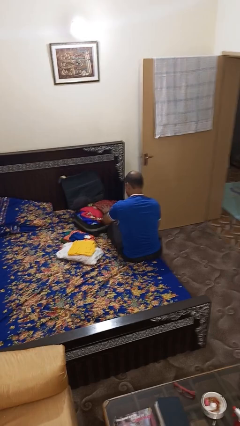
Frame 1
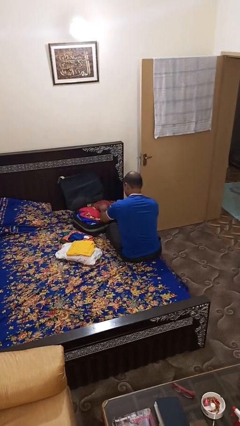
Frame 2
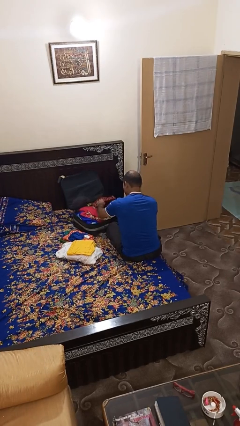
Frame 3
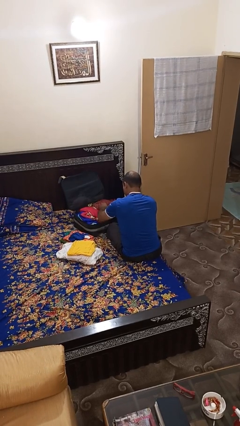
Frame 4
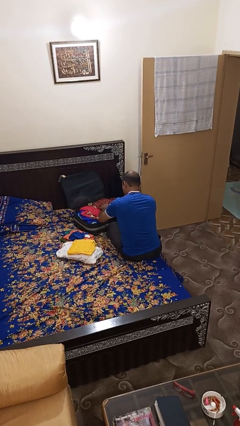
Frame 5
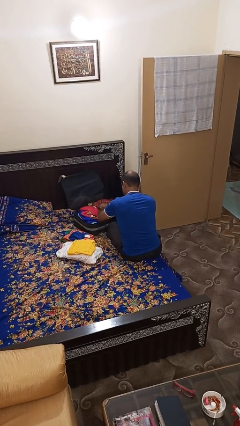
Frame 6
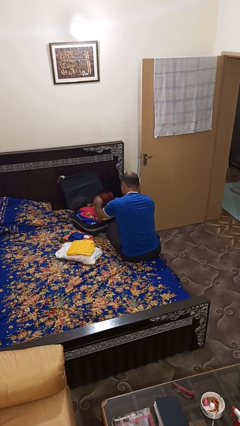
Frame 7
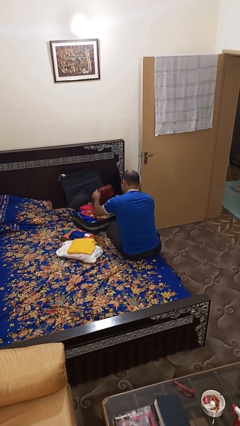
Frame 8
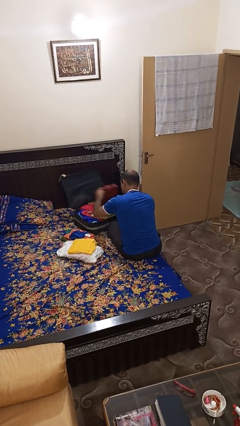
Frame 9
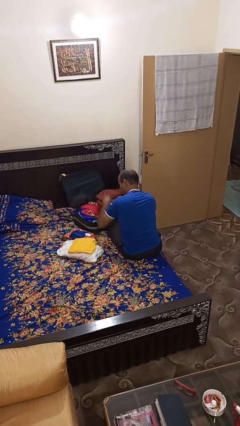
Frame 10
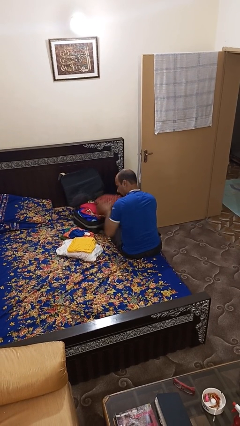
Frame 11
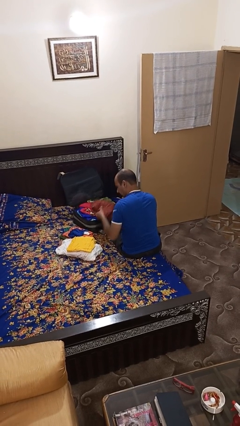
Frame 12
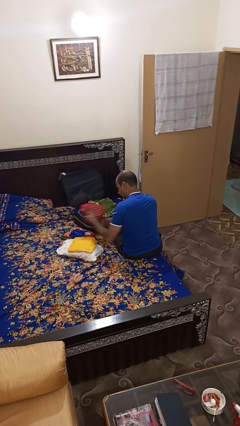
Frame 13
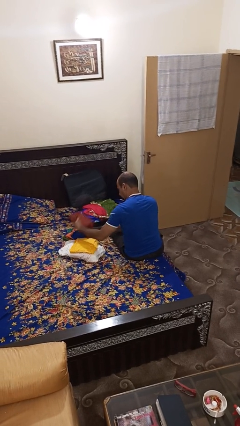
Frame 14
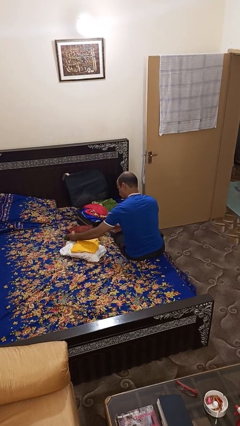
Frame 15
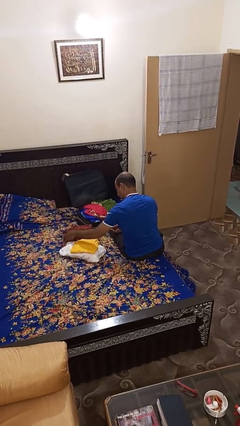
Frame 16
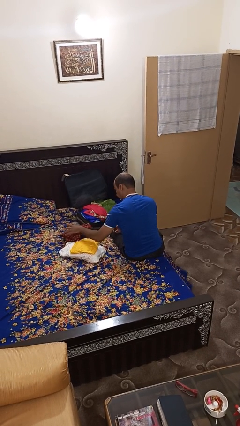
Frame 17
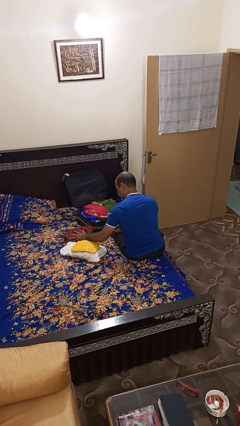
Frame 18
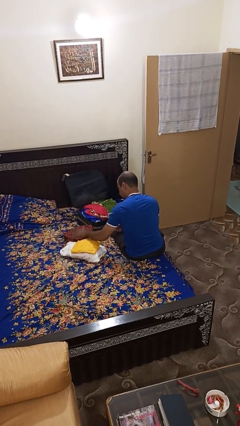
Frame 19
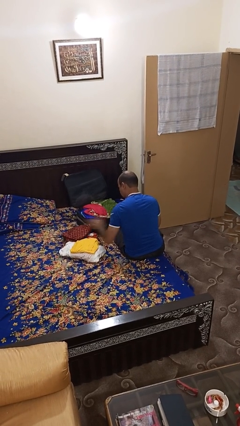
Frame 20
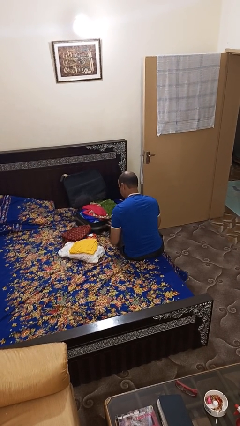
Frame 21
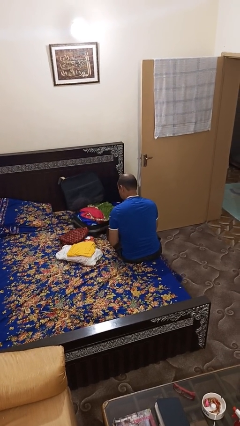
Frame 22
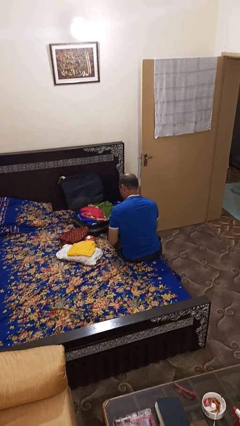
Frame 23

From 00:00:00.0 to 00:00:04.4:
person unloads clothes from suitcase

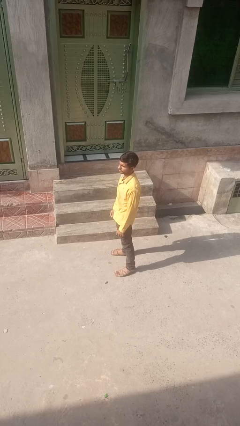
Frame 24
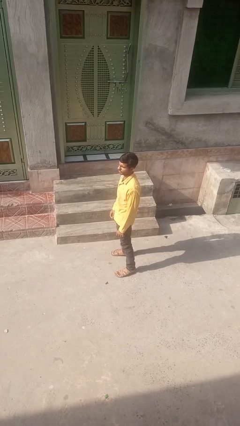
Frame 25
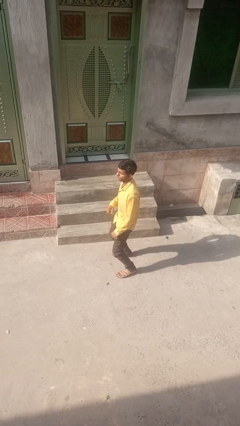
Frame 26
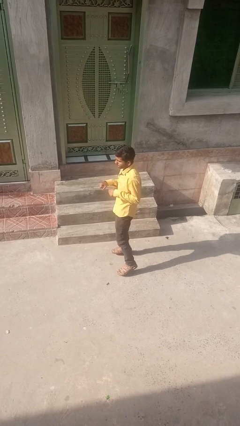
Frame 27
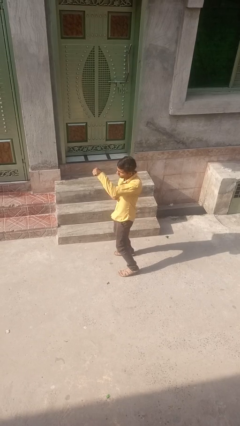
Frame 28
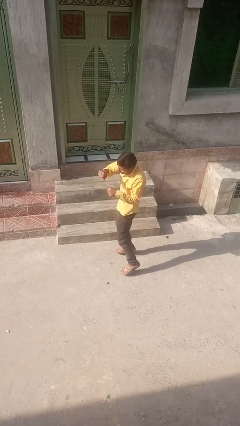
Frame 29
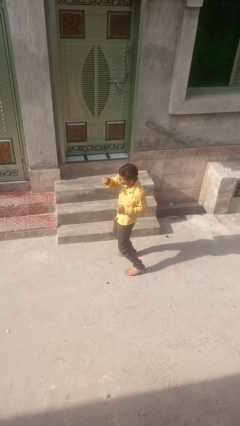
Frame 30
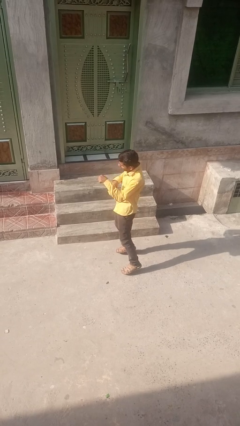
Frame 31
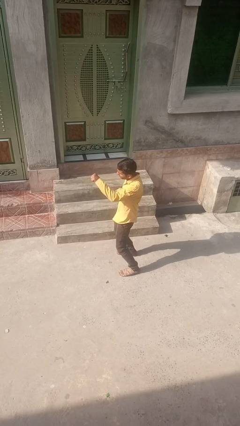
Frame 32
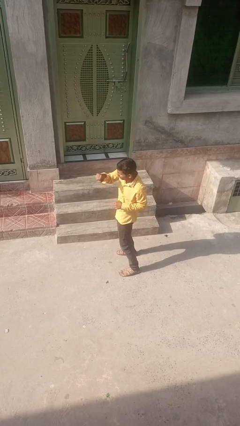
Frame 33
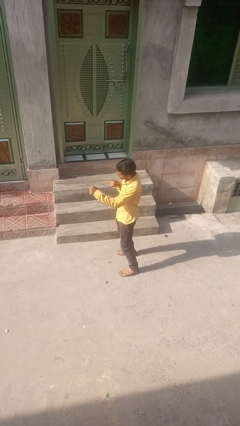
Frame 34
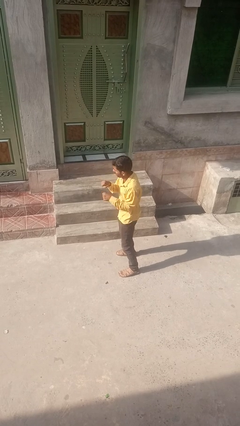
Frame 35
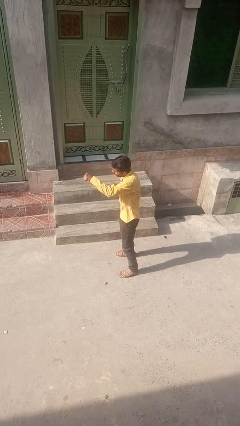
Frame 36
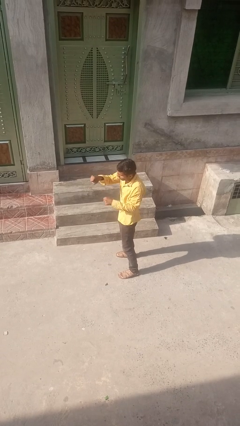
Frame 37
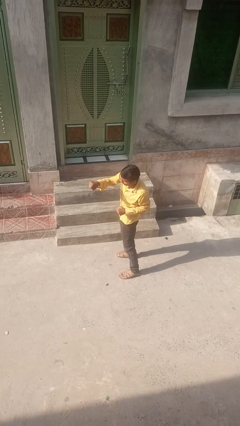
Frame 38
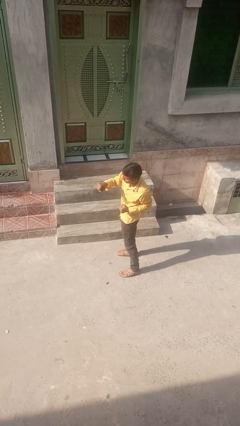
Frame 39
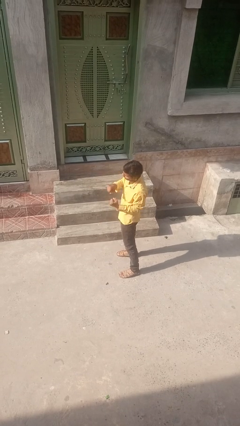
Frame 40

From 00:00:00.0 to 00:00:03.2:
person punches

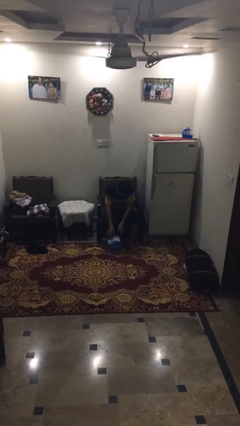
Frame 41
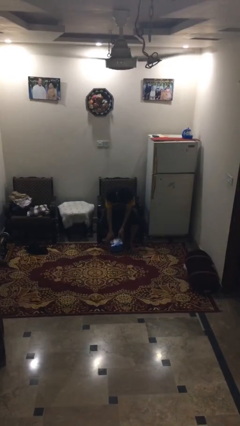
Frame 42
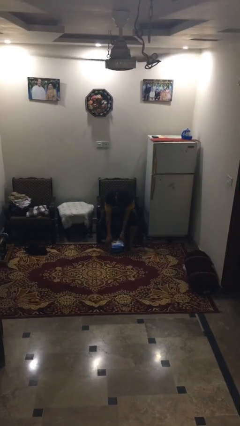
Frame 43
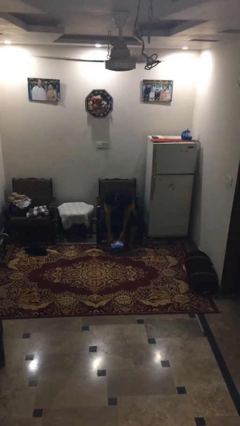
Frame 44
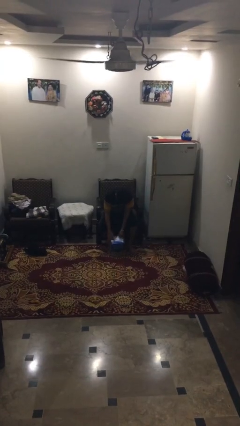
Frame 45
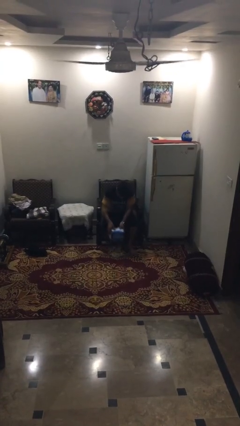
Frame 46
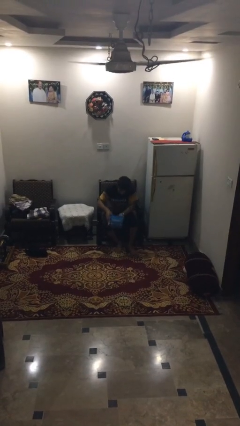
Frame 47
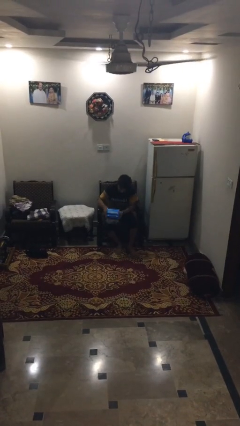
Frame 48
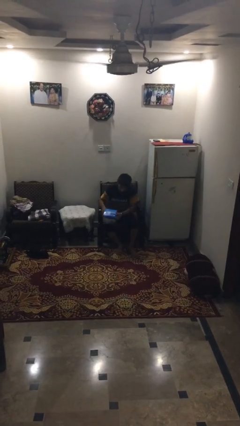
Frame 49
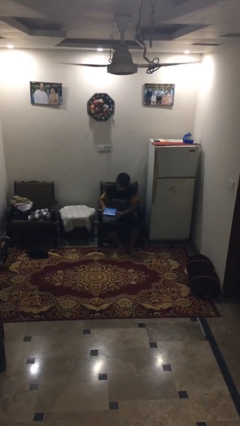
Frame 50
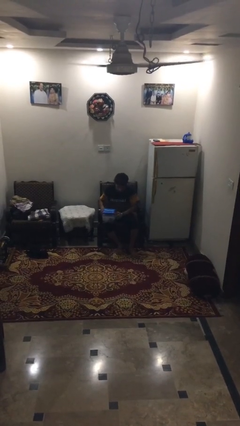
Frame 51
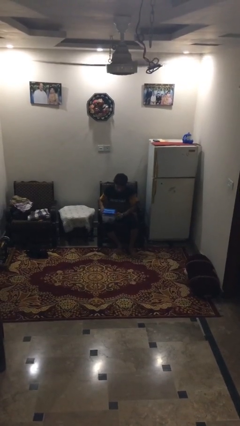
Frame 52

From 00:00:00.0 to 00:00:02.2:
person picks up object from floor

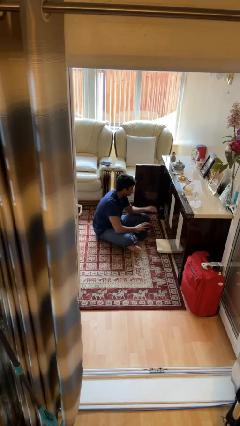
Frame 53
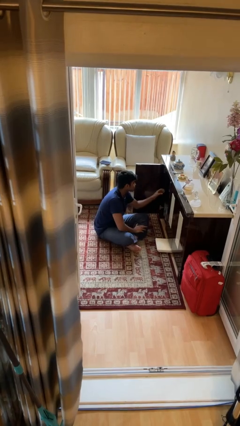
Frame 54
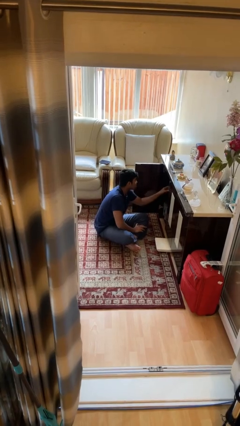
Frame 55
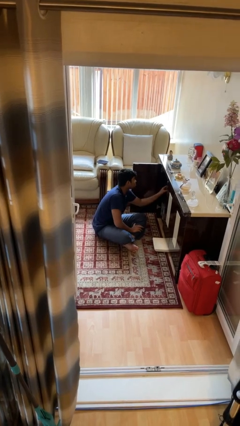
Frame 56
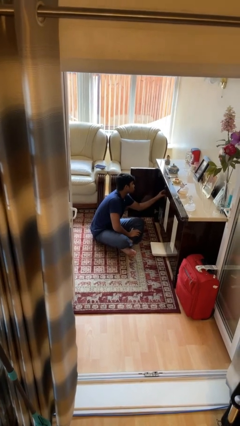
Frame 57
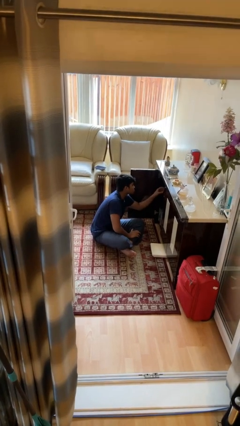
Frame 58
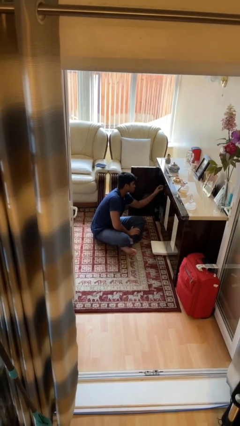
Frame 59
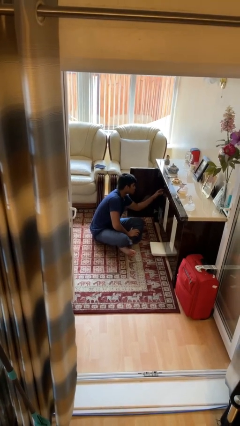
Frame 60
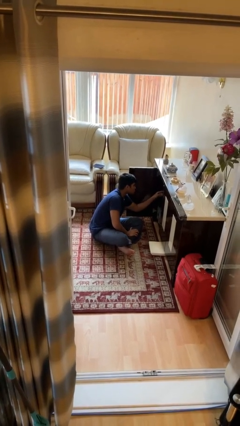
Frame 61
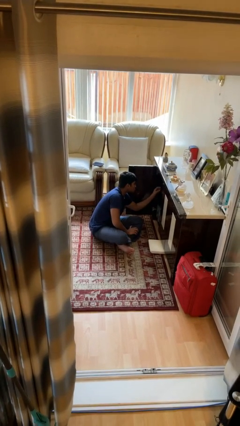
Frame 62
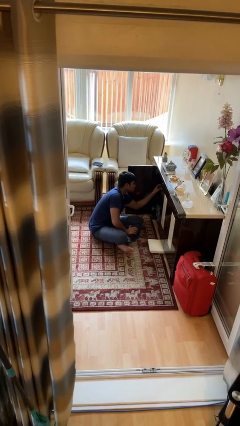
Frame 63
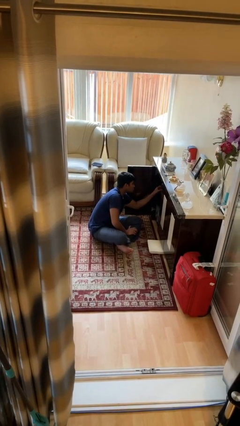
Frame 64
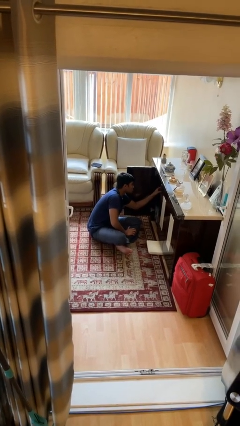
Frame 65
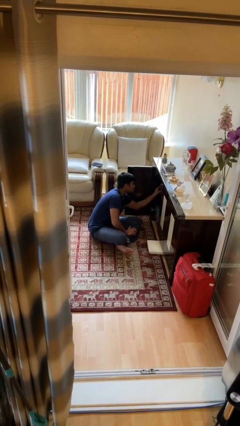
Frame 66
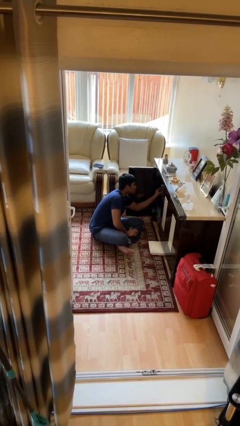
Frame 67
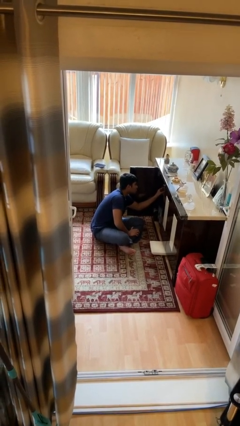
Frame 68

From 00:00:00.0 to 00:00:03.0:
person searches in cabinet

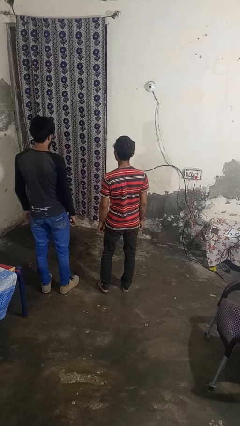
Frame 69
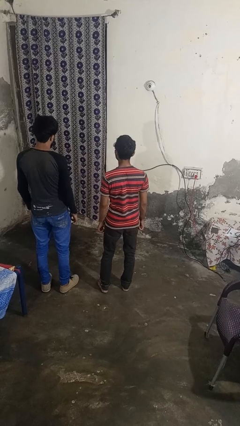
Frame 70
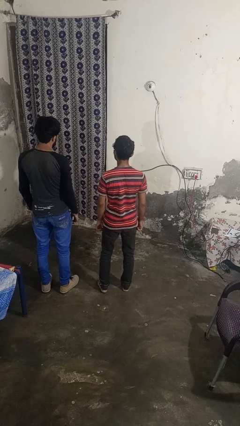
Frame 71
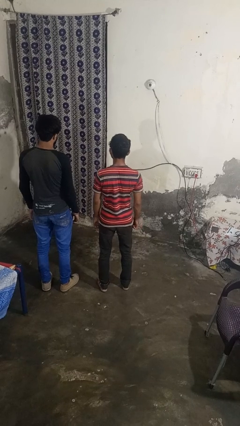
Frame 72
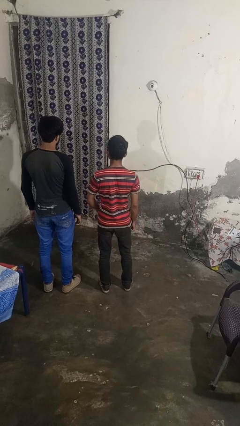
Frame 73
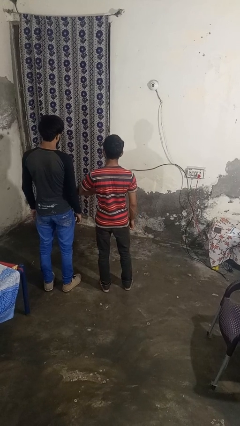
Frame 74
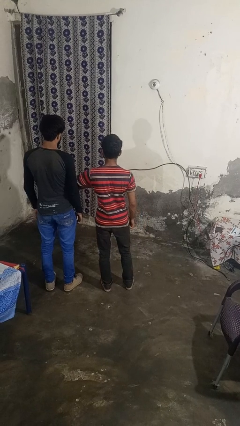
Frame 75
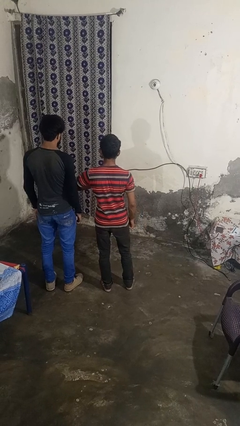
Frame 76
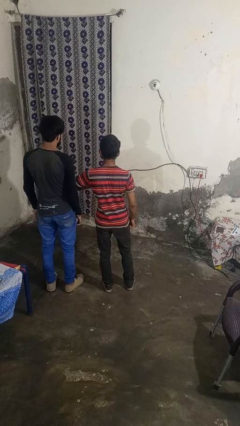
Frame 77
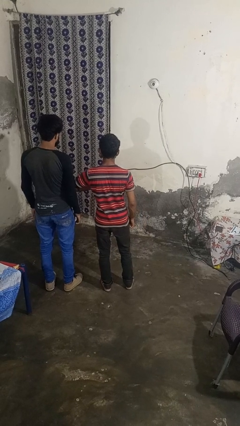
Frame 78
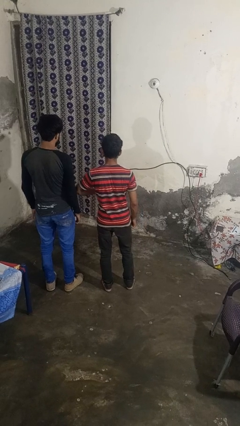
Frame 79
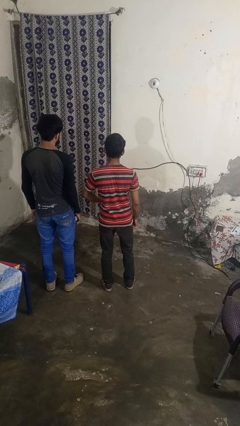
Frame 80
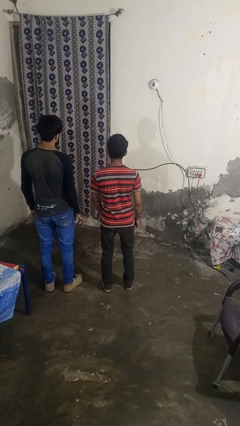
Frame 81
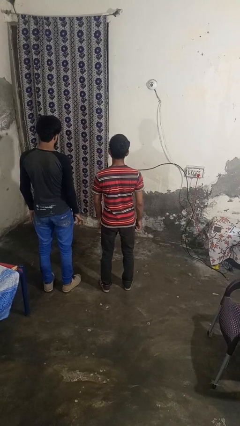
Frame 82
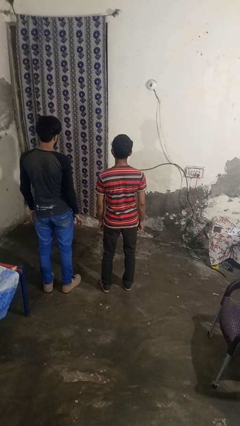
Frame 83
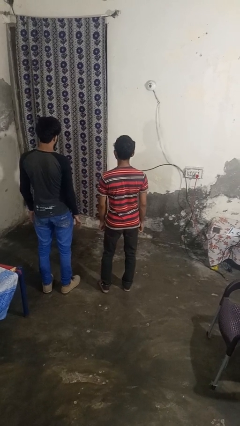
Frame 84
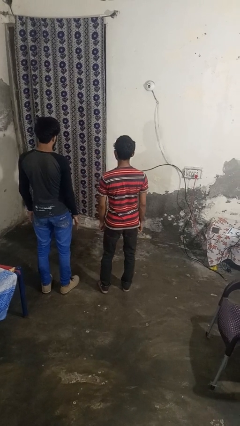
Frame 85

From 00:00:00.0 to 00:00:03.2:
person nudges person with elbow

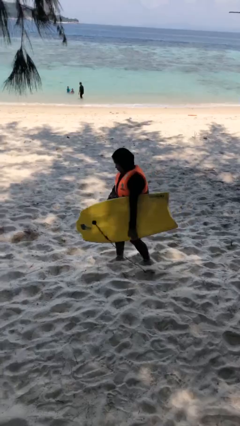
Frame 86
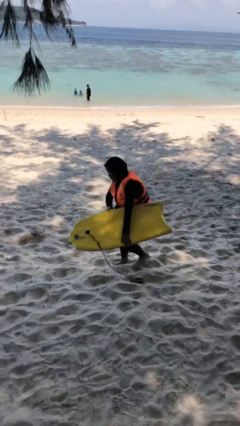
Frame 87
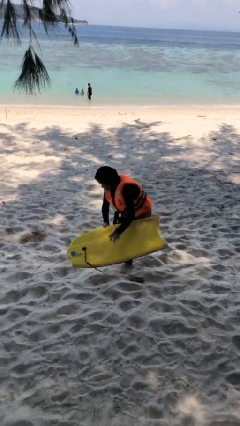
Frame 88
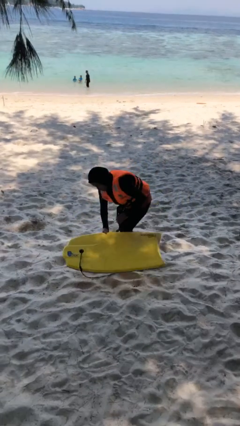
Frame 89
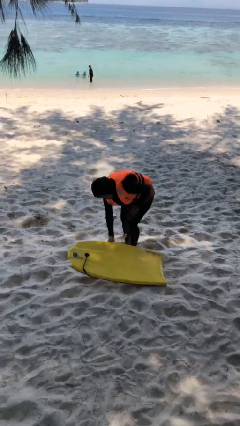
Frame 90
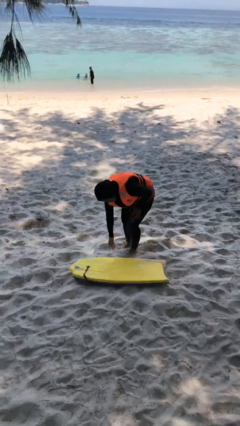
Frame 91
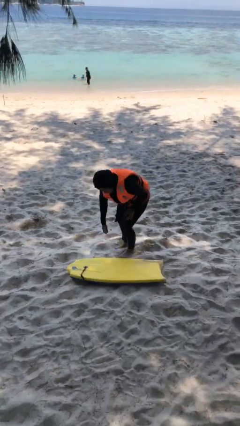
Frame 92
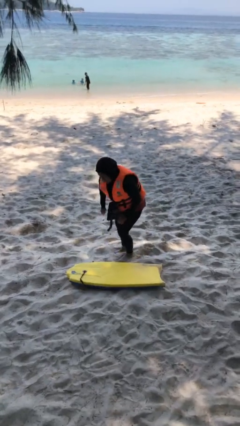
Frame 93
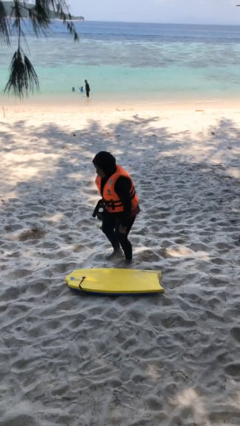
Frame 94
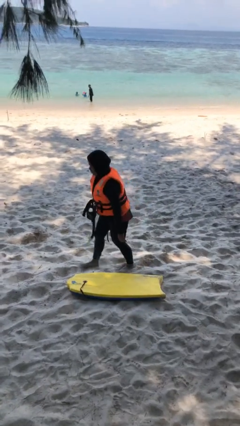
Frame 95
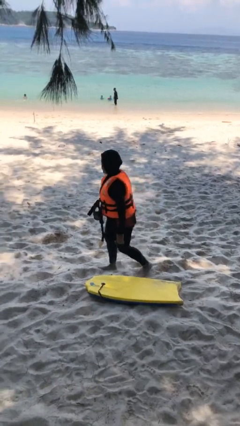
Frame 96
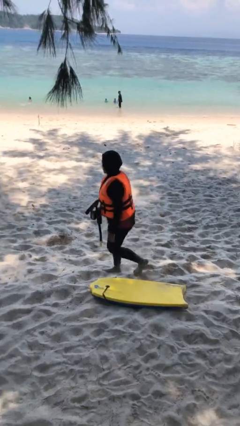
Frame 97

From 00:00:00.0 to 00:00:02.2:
person puts down object on floor
